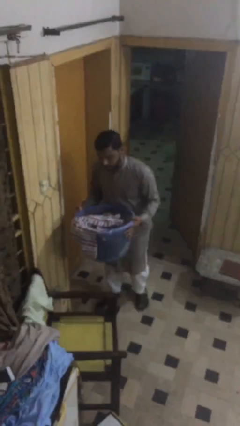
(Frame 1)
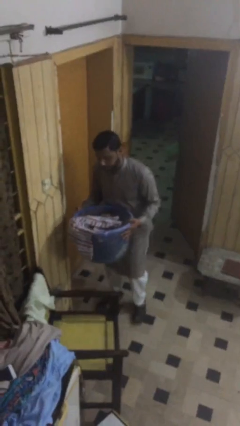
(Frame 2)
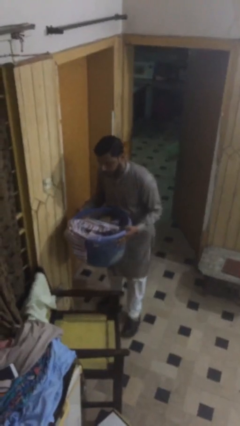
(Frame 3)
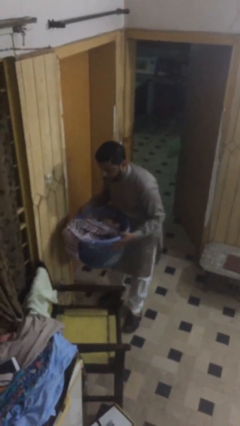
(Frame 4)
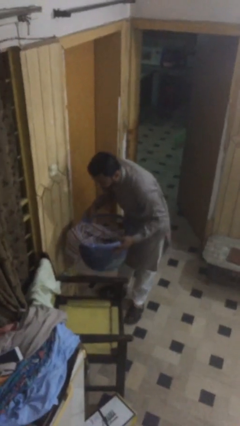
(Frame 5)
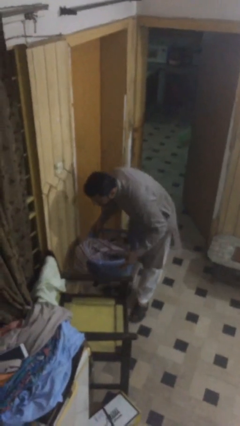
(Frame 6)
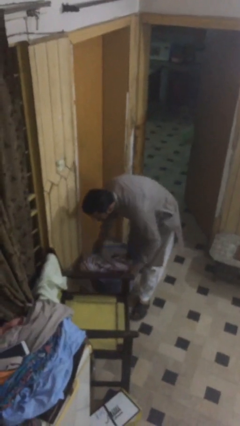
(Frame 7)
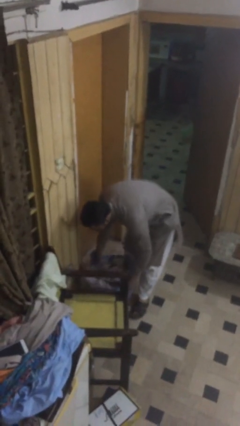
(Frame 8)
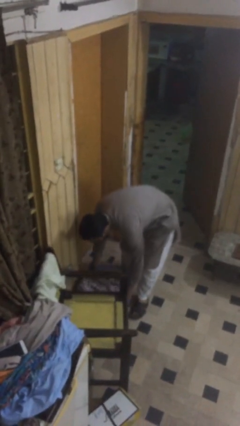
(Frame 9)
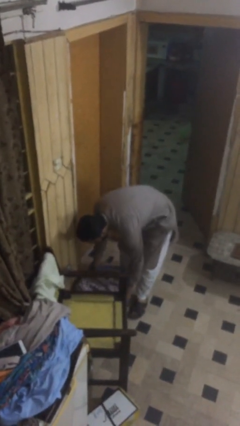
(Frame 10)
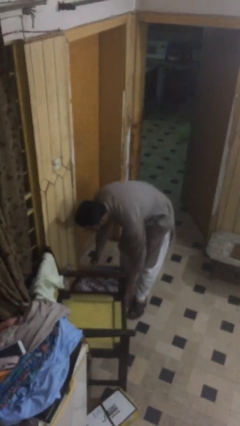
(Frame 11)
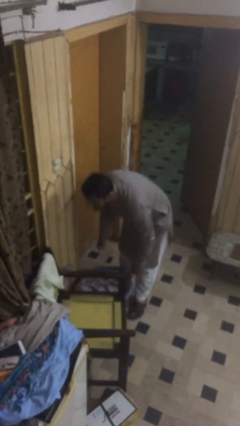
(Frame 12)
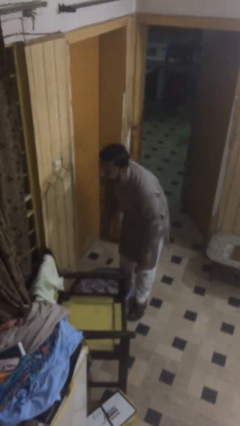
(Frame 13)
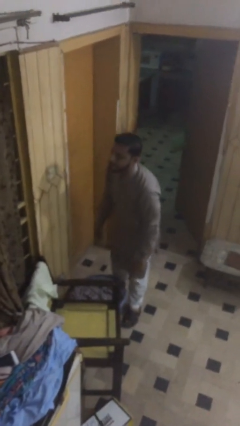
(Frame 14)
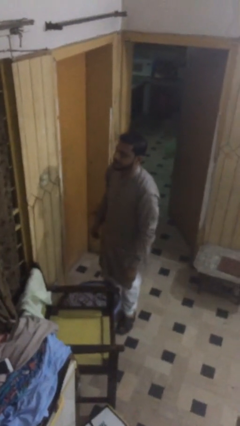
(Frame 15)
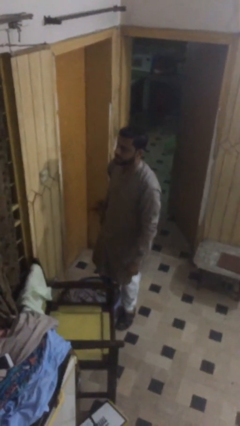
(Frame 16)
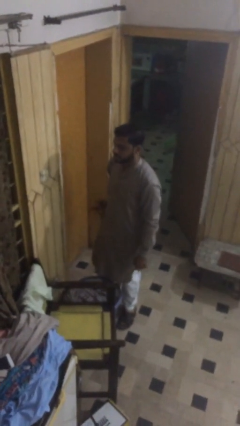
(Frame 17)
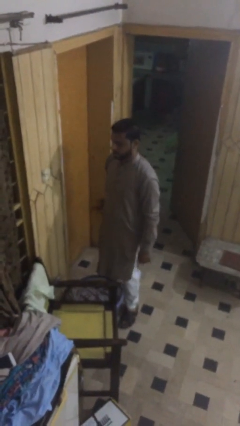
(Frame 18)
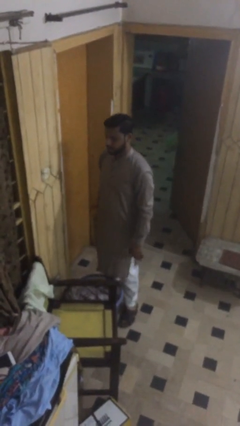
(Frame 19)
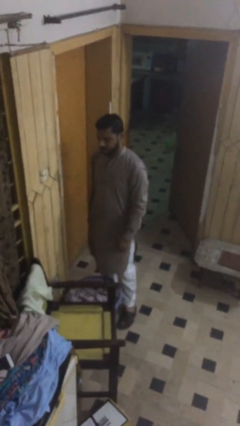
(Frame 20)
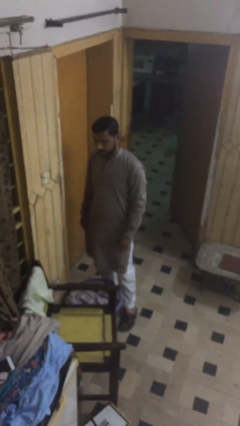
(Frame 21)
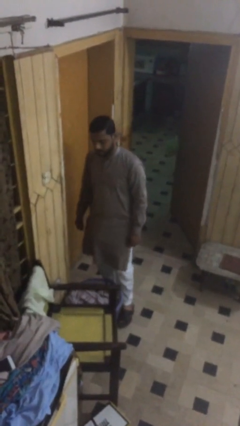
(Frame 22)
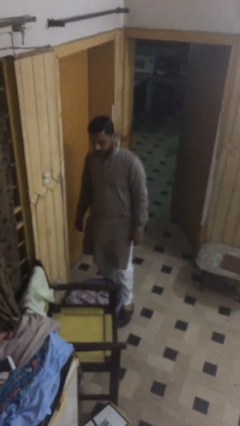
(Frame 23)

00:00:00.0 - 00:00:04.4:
person puts down object on floor

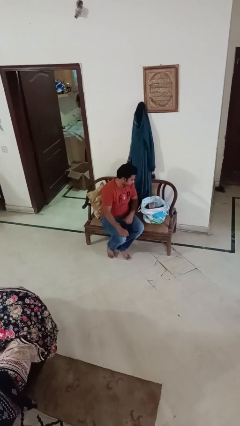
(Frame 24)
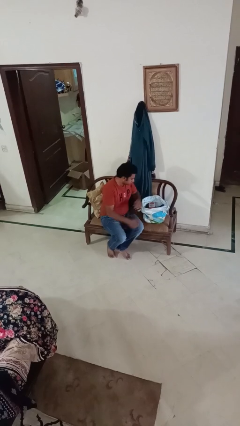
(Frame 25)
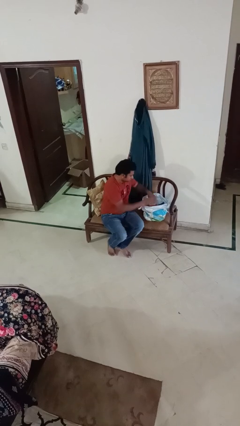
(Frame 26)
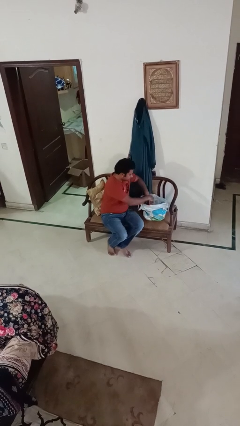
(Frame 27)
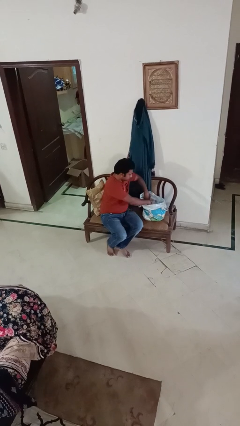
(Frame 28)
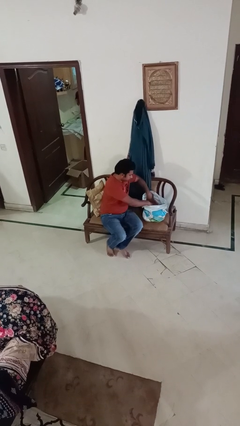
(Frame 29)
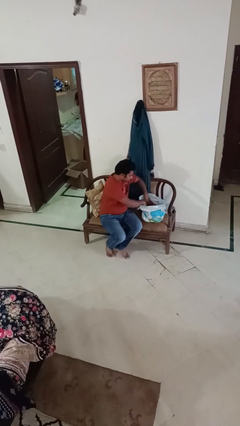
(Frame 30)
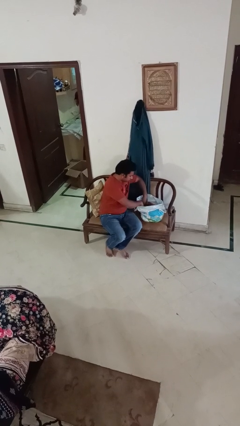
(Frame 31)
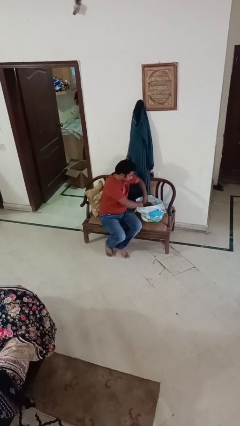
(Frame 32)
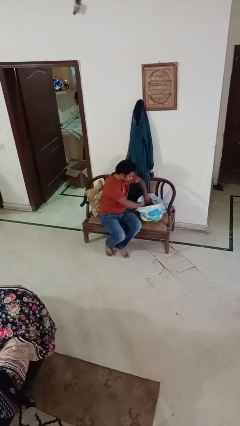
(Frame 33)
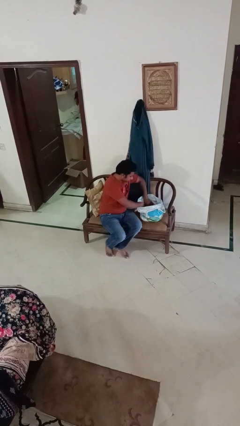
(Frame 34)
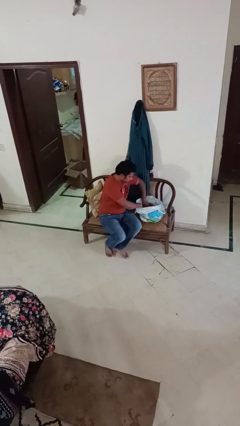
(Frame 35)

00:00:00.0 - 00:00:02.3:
person searches in bag

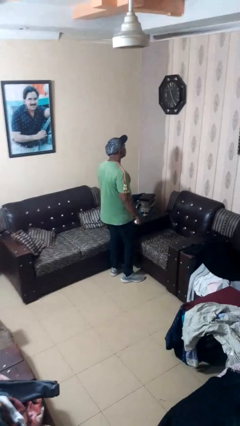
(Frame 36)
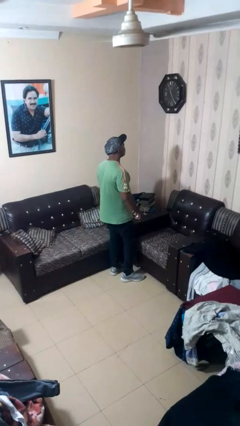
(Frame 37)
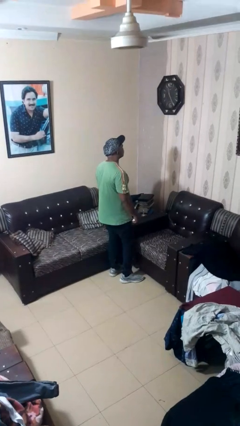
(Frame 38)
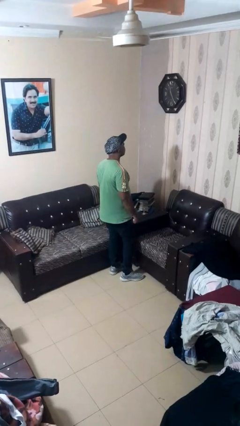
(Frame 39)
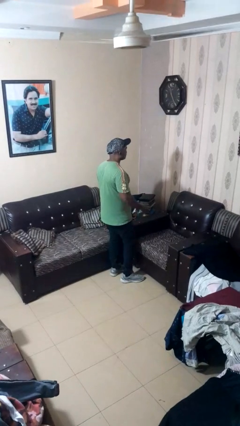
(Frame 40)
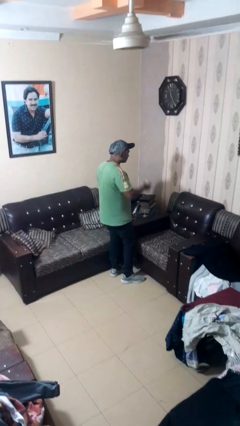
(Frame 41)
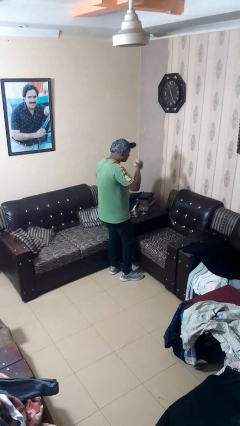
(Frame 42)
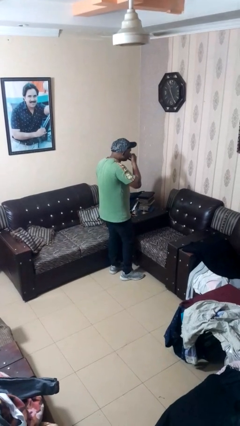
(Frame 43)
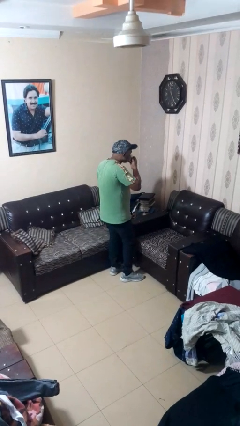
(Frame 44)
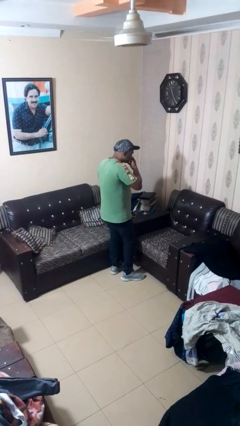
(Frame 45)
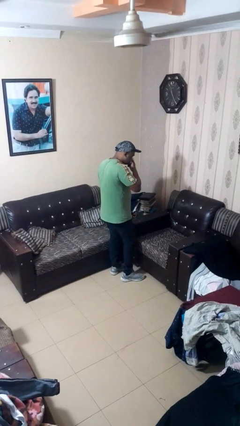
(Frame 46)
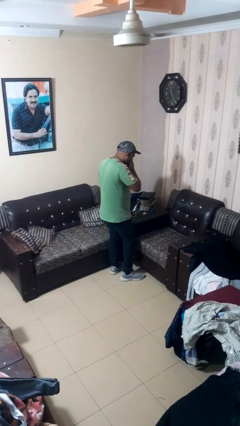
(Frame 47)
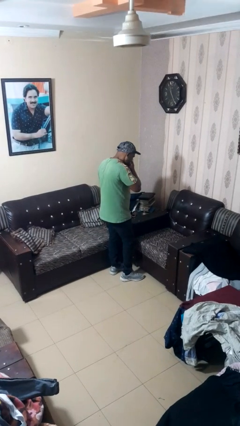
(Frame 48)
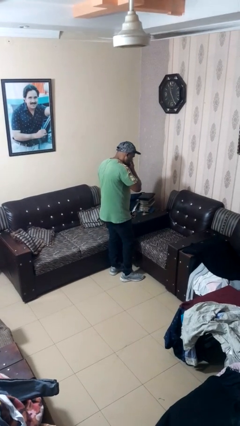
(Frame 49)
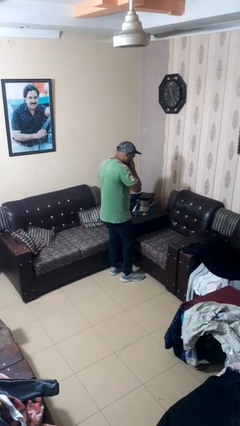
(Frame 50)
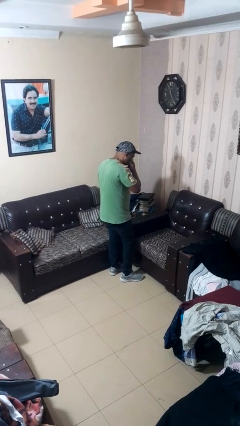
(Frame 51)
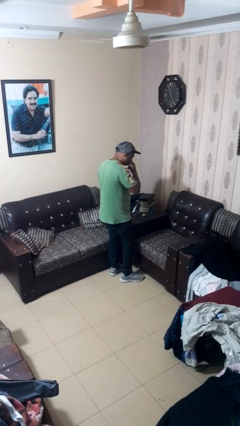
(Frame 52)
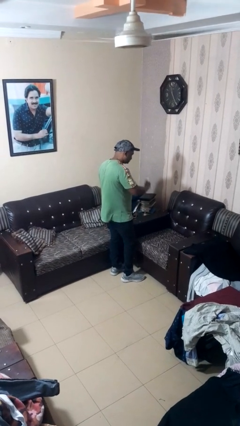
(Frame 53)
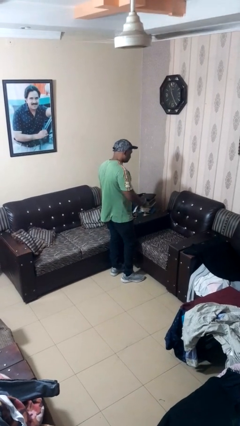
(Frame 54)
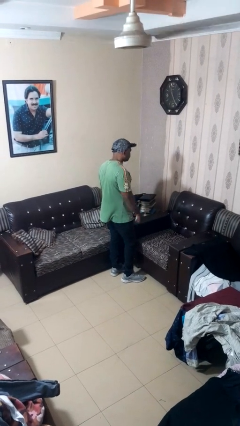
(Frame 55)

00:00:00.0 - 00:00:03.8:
person blows nose

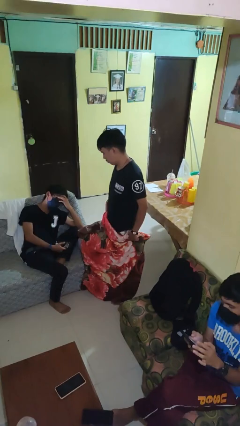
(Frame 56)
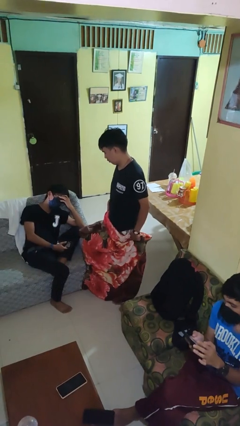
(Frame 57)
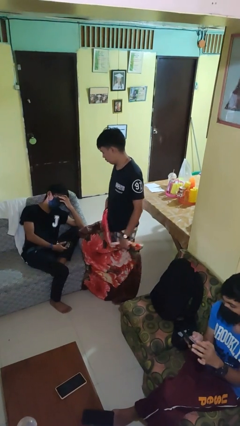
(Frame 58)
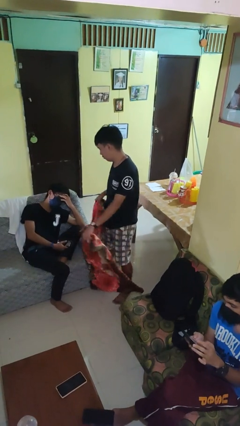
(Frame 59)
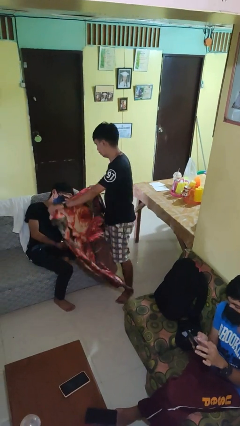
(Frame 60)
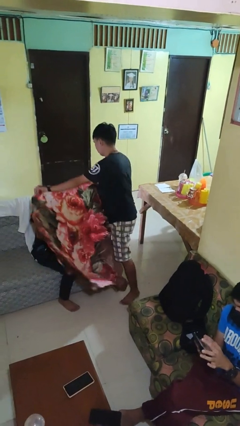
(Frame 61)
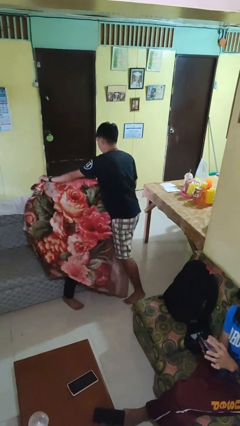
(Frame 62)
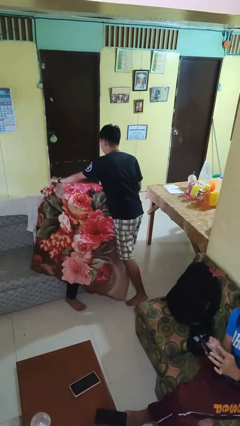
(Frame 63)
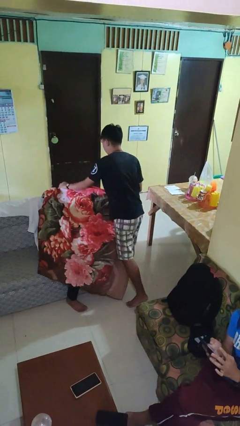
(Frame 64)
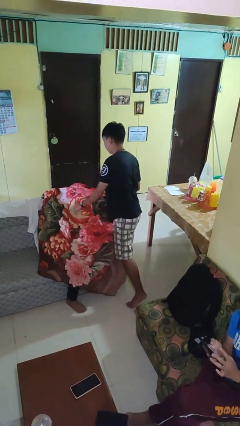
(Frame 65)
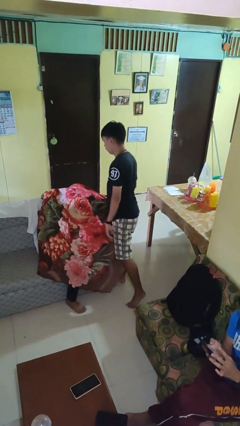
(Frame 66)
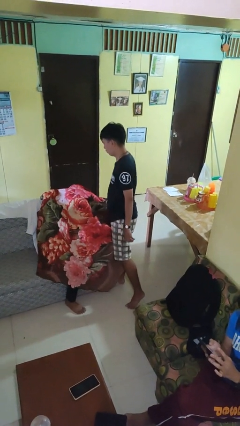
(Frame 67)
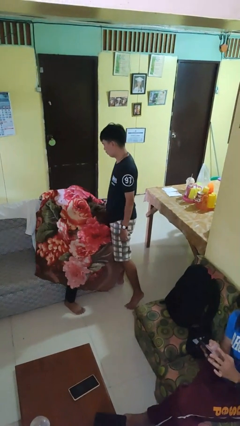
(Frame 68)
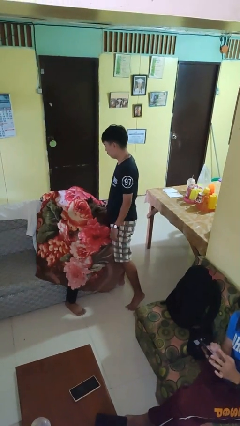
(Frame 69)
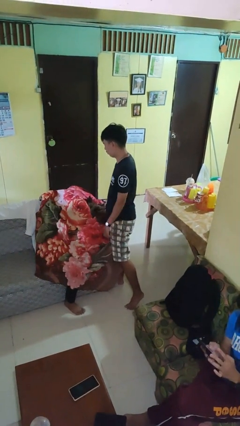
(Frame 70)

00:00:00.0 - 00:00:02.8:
person covers friend with blanket

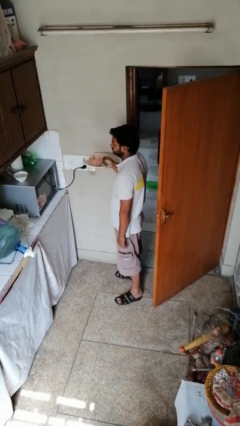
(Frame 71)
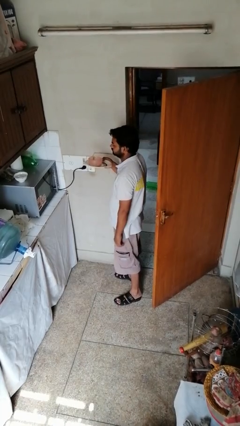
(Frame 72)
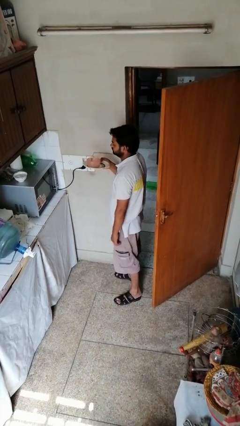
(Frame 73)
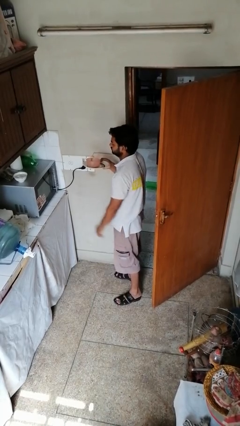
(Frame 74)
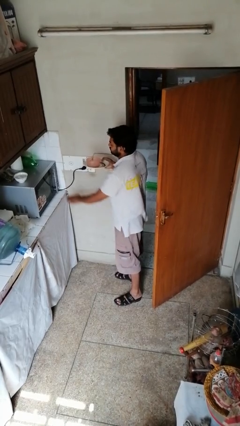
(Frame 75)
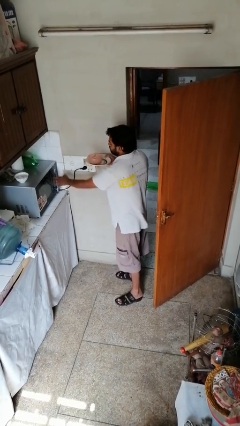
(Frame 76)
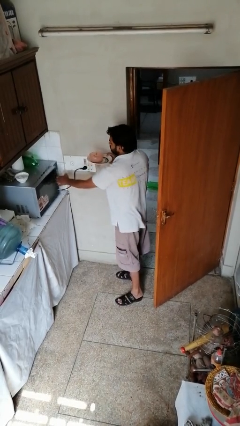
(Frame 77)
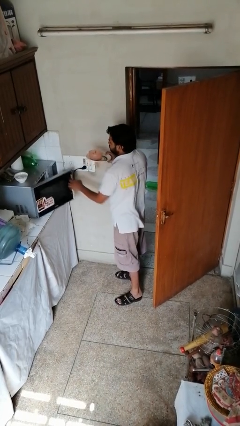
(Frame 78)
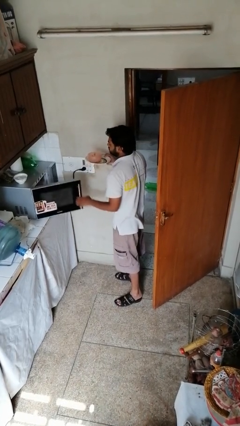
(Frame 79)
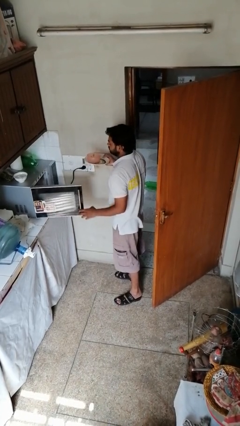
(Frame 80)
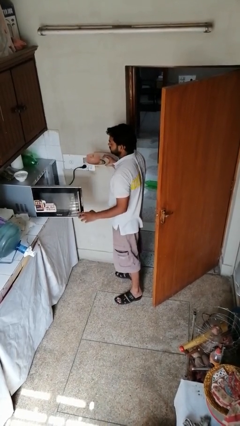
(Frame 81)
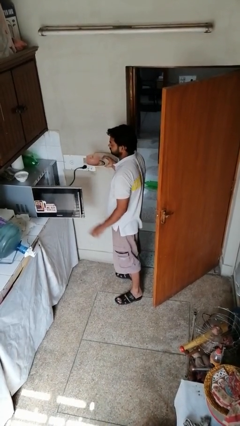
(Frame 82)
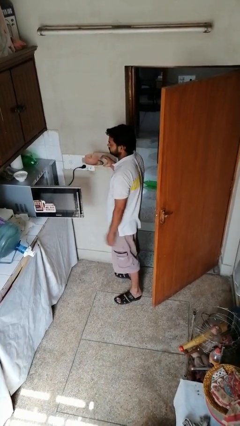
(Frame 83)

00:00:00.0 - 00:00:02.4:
person opens microwave

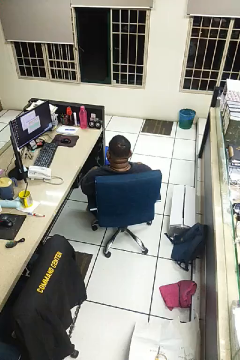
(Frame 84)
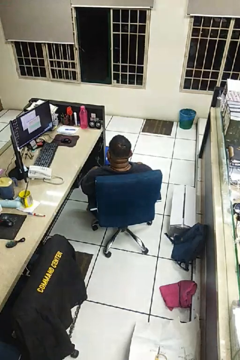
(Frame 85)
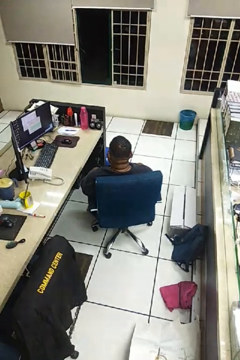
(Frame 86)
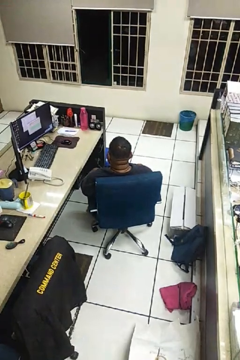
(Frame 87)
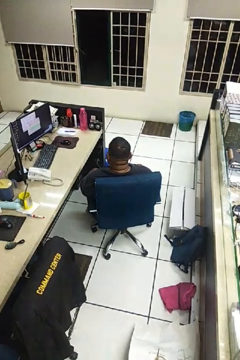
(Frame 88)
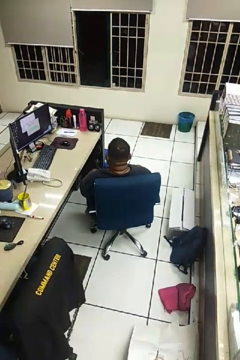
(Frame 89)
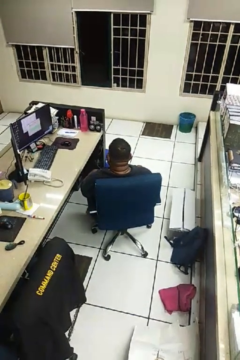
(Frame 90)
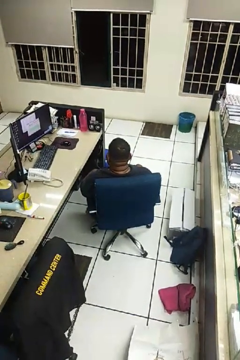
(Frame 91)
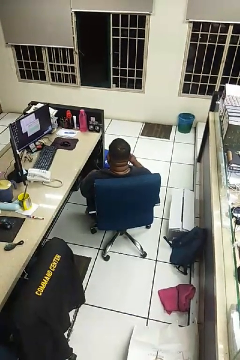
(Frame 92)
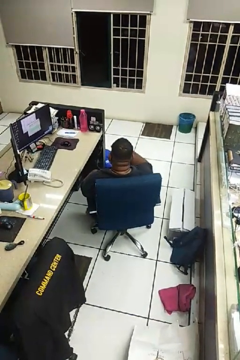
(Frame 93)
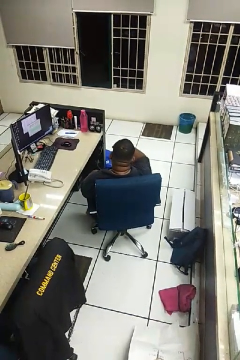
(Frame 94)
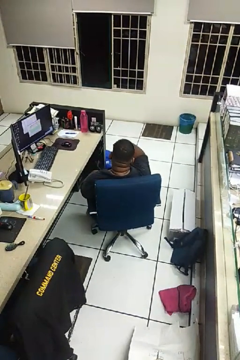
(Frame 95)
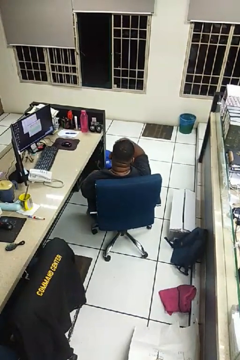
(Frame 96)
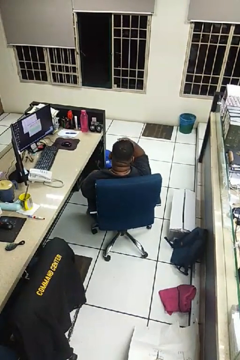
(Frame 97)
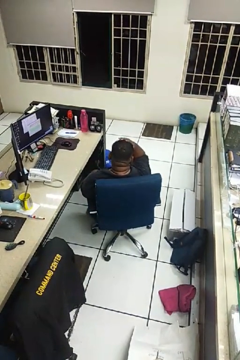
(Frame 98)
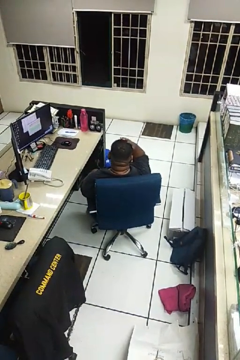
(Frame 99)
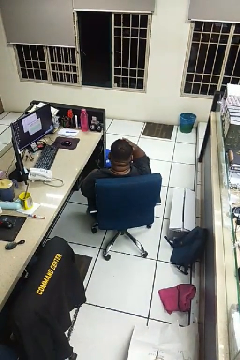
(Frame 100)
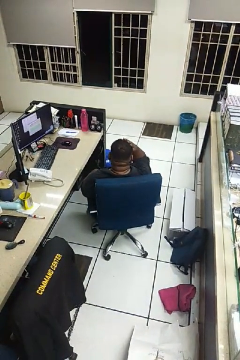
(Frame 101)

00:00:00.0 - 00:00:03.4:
person strokes hair
